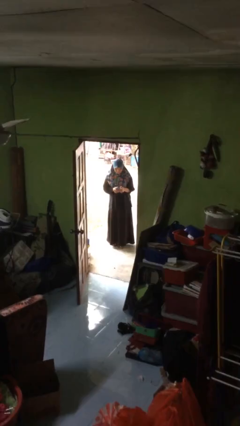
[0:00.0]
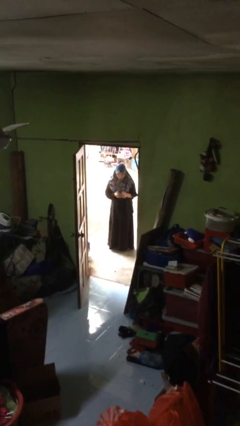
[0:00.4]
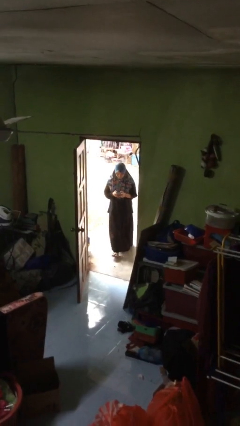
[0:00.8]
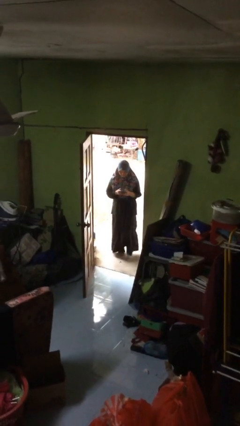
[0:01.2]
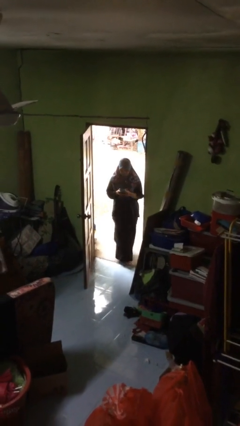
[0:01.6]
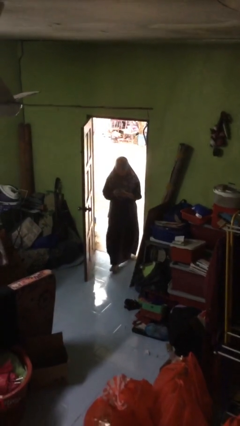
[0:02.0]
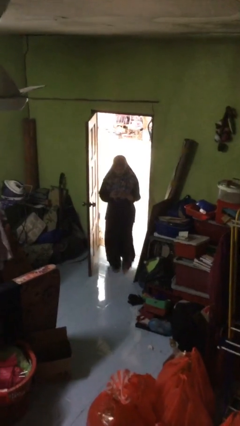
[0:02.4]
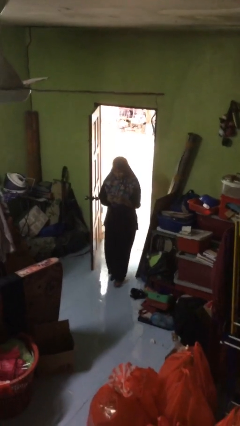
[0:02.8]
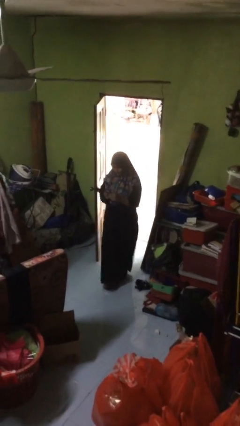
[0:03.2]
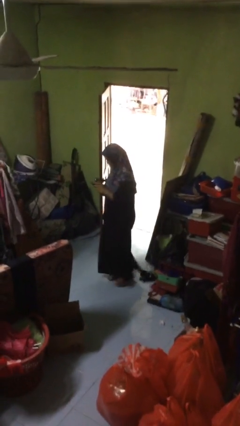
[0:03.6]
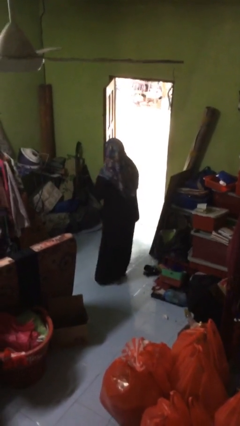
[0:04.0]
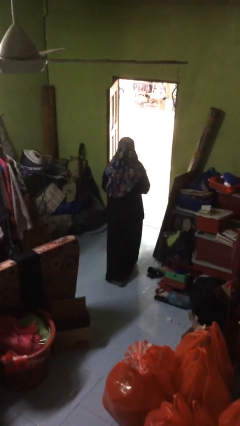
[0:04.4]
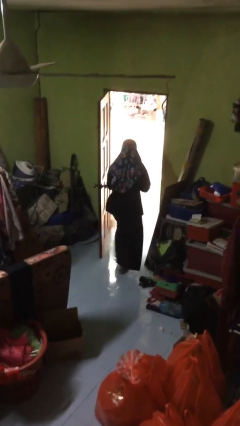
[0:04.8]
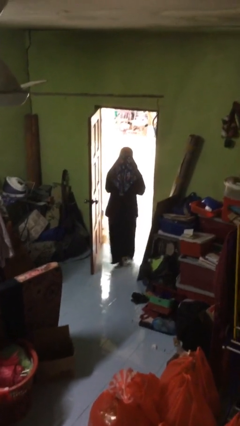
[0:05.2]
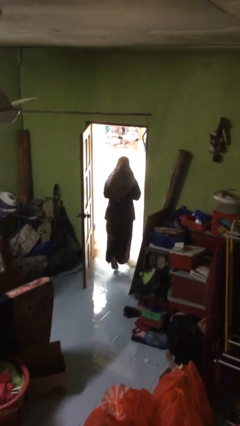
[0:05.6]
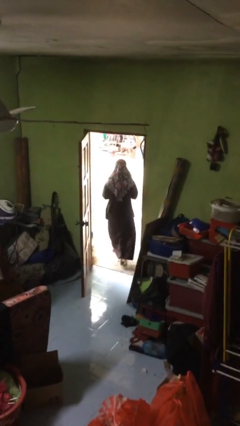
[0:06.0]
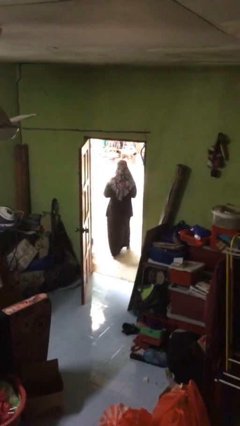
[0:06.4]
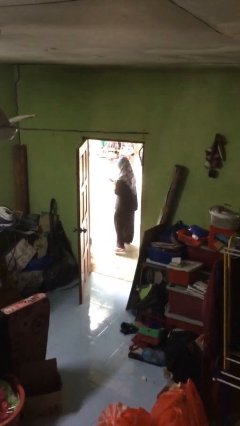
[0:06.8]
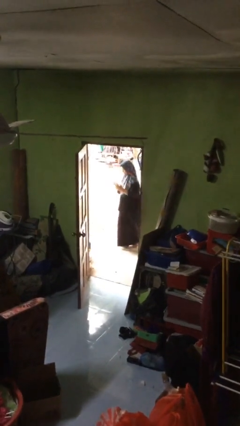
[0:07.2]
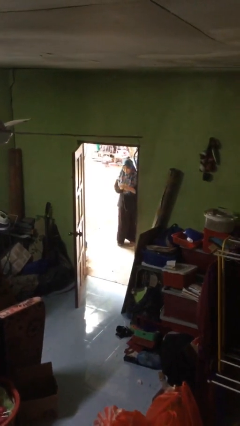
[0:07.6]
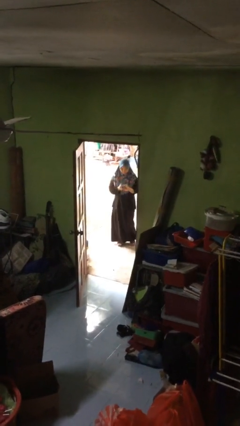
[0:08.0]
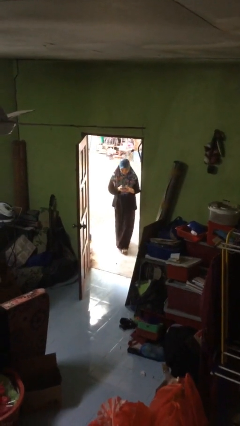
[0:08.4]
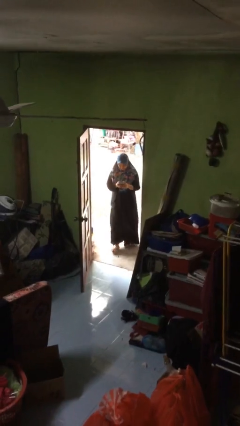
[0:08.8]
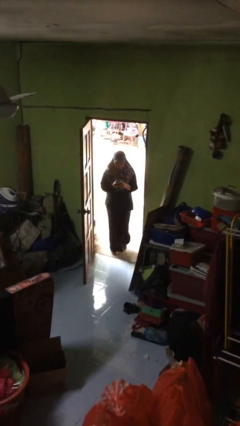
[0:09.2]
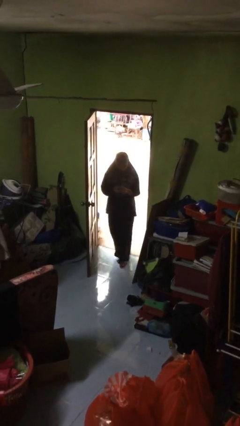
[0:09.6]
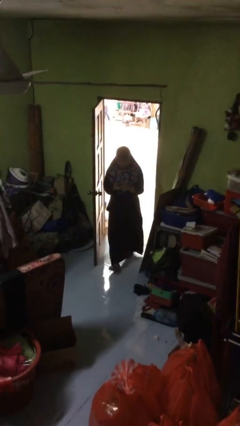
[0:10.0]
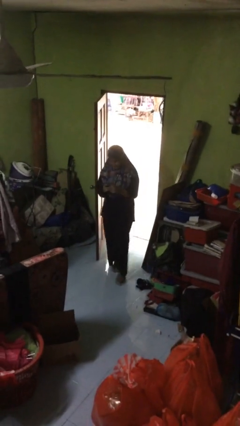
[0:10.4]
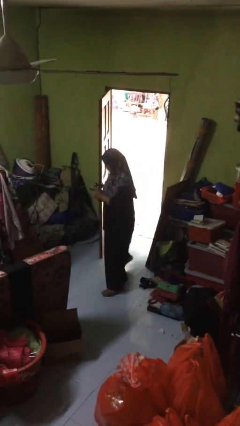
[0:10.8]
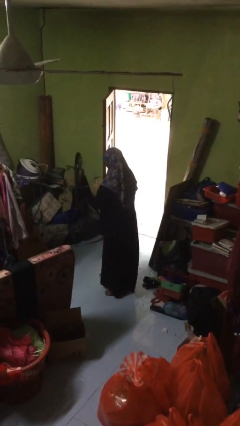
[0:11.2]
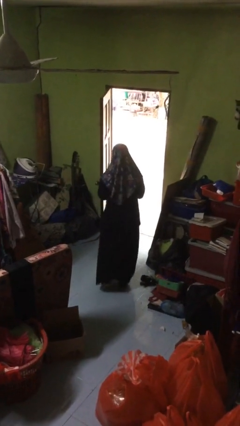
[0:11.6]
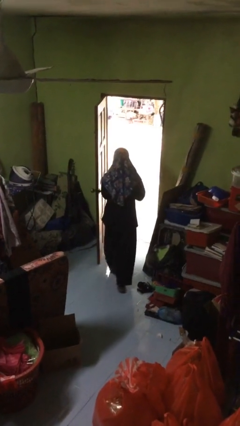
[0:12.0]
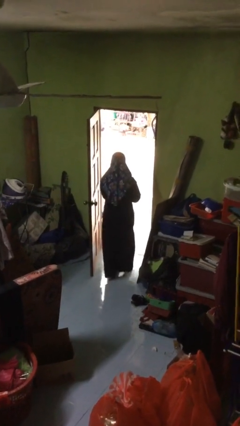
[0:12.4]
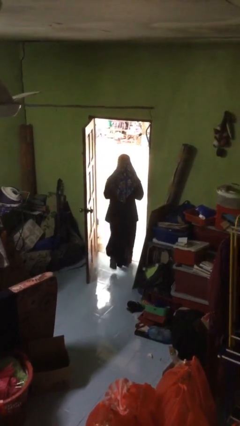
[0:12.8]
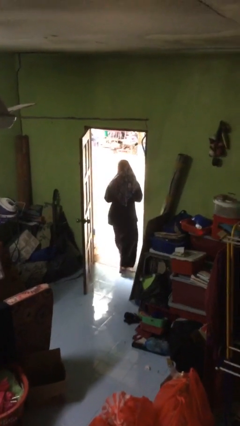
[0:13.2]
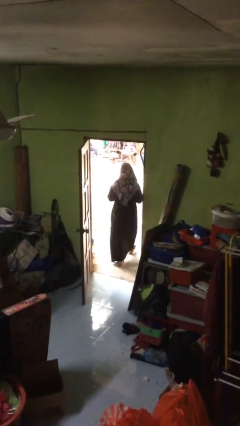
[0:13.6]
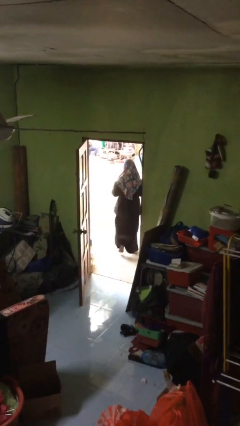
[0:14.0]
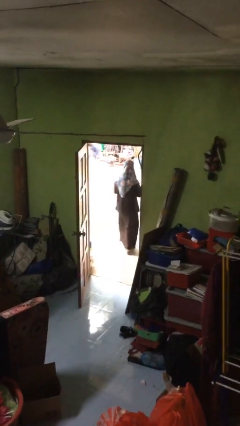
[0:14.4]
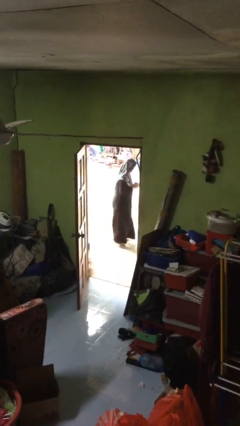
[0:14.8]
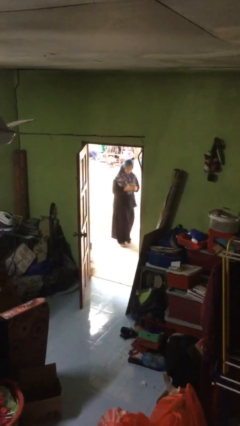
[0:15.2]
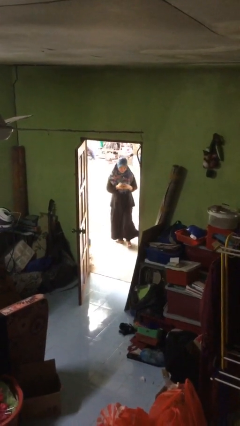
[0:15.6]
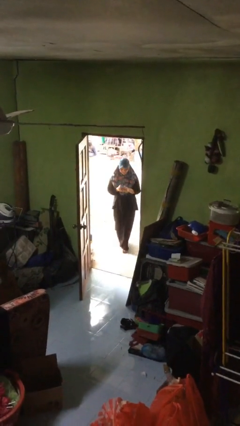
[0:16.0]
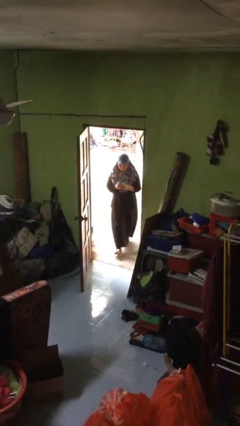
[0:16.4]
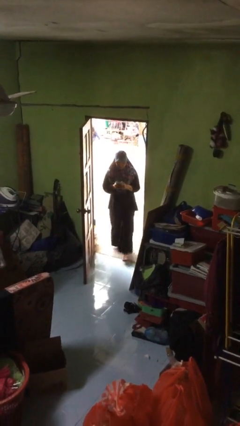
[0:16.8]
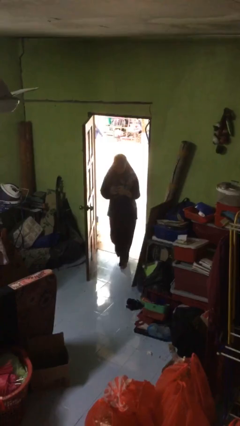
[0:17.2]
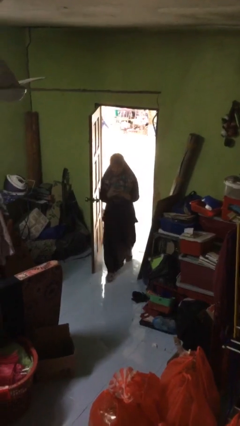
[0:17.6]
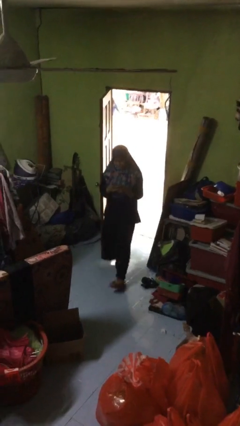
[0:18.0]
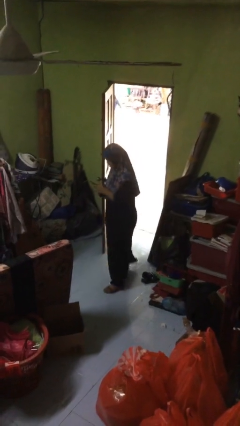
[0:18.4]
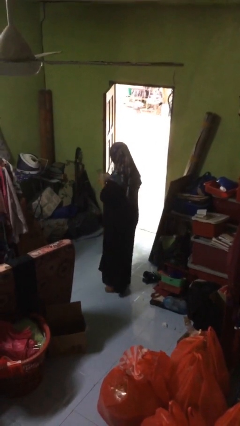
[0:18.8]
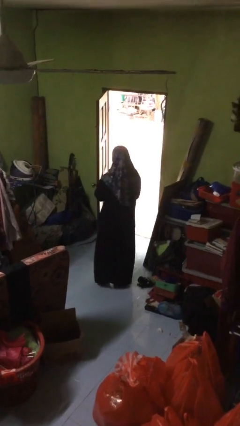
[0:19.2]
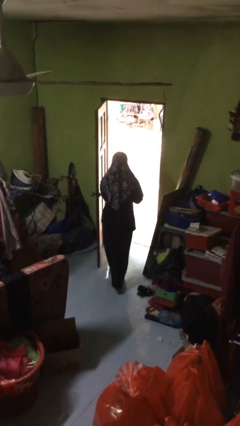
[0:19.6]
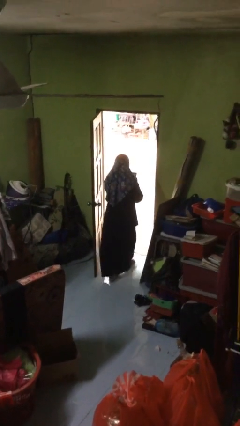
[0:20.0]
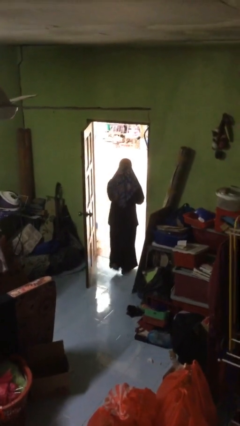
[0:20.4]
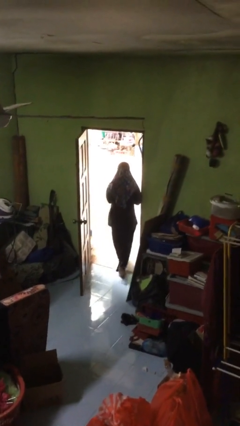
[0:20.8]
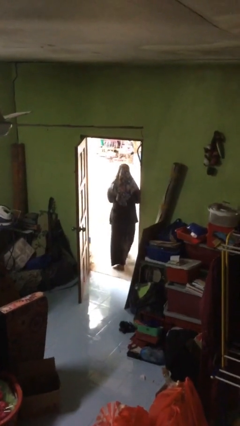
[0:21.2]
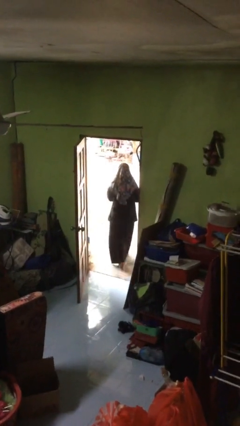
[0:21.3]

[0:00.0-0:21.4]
person texts on phone

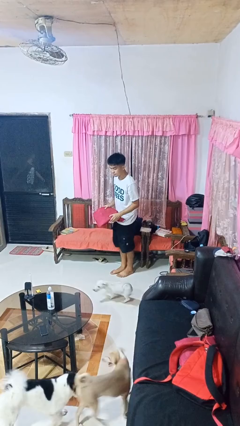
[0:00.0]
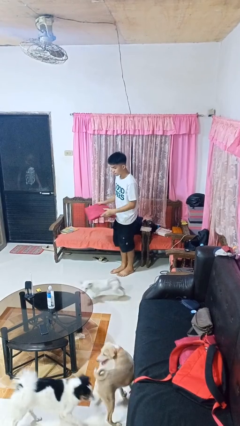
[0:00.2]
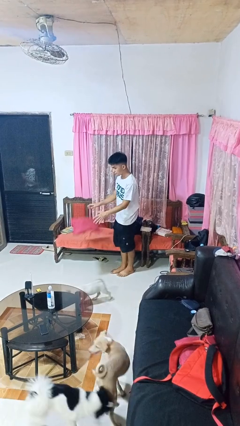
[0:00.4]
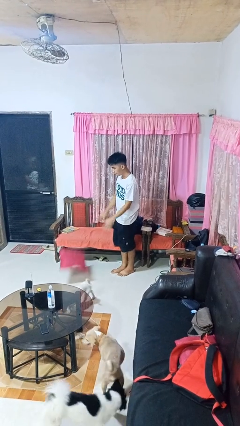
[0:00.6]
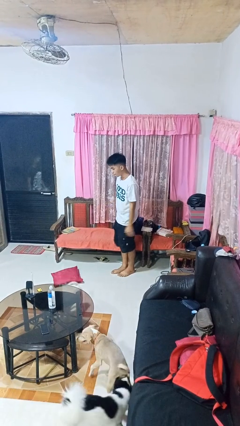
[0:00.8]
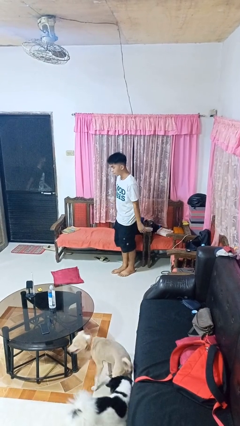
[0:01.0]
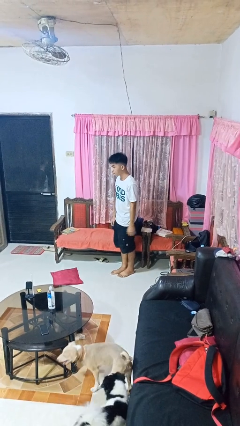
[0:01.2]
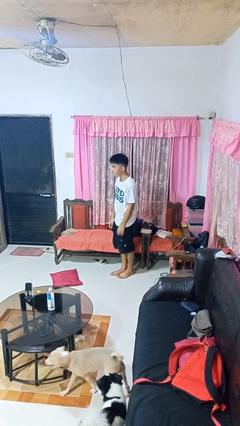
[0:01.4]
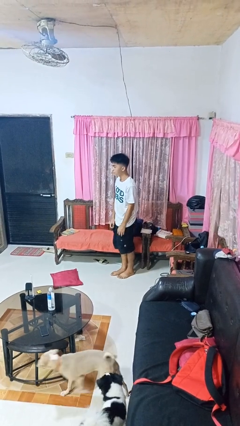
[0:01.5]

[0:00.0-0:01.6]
person throws object to ground

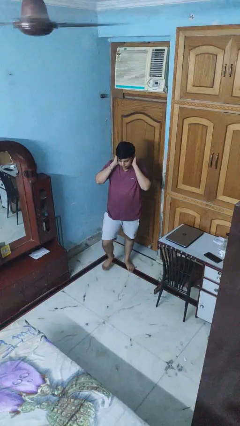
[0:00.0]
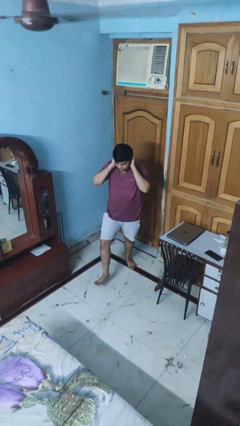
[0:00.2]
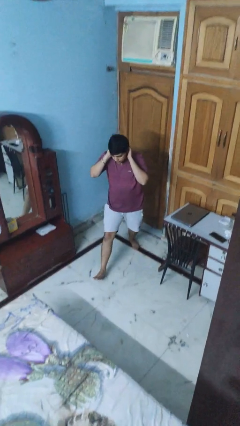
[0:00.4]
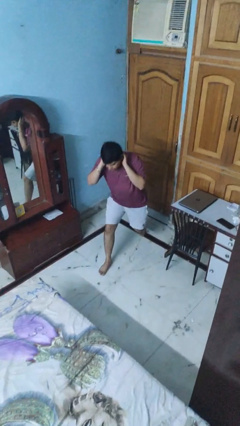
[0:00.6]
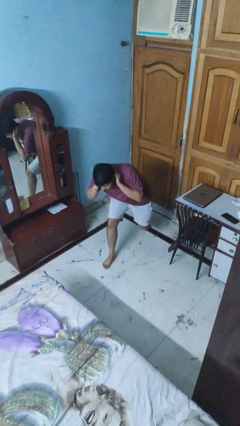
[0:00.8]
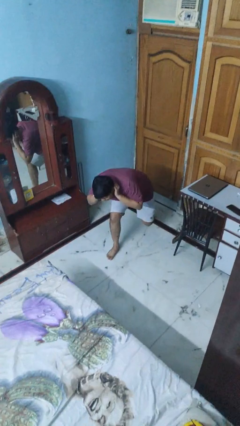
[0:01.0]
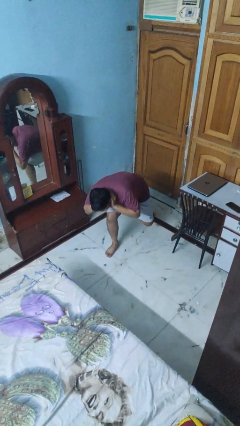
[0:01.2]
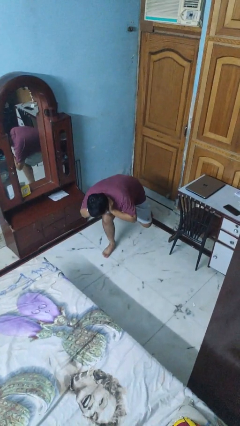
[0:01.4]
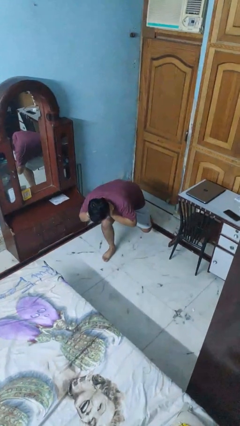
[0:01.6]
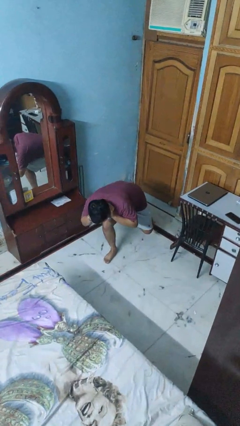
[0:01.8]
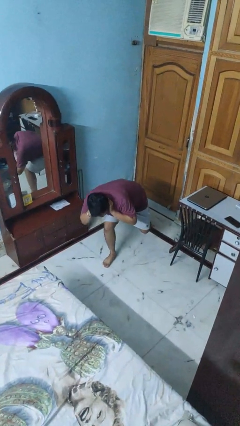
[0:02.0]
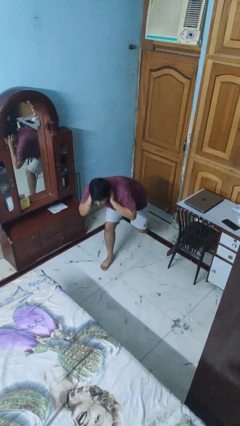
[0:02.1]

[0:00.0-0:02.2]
person exercises with lunges

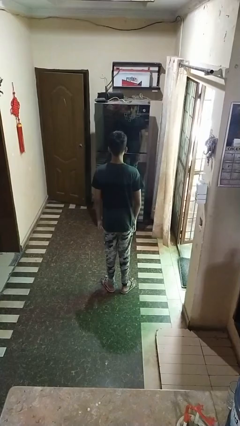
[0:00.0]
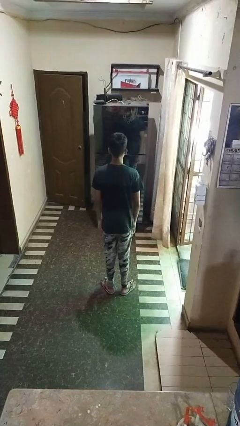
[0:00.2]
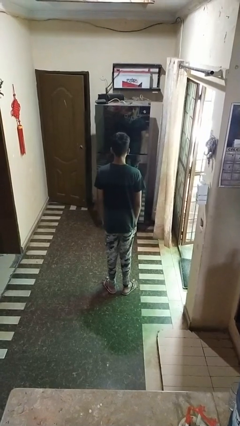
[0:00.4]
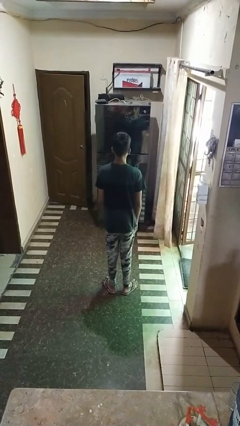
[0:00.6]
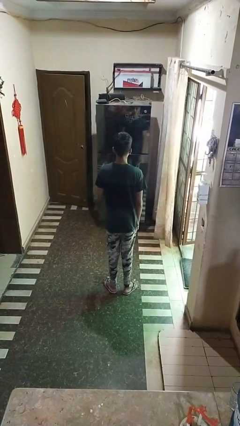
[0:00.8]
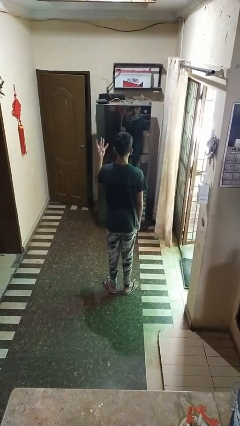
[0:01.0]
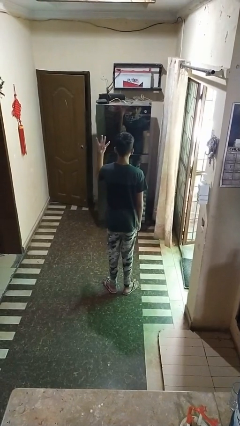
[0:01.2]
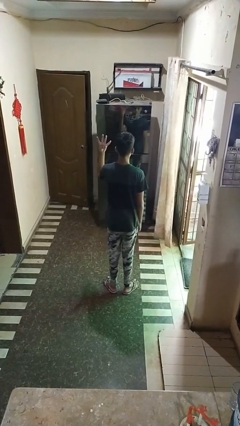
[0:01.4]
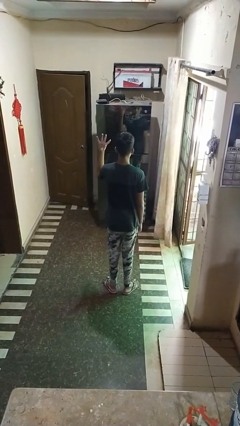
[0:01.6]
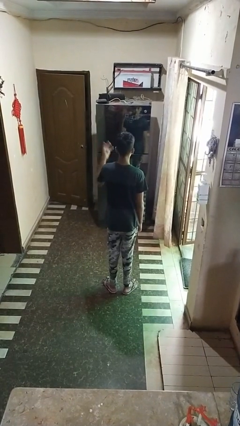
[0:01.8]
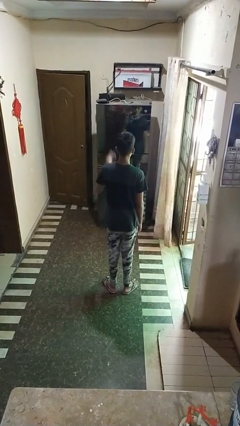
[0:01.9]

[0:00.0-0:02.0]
person gestures number four

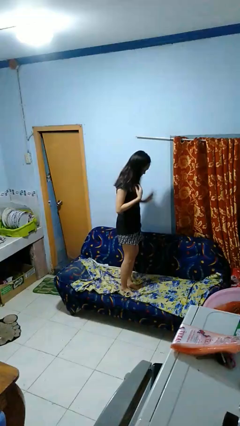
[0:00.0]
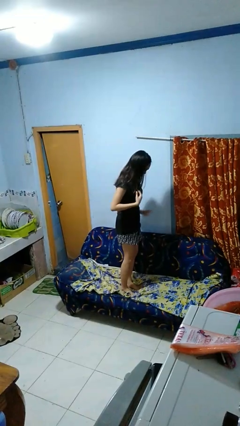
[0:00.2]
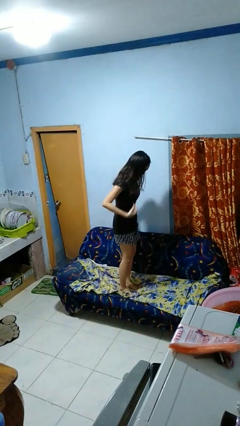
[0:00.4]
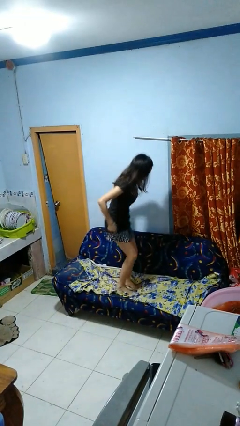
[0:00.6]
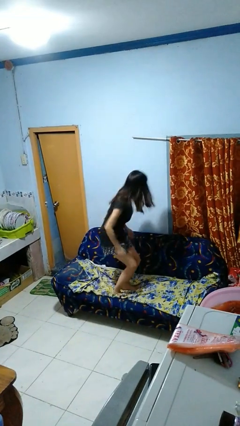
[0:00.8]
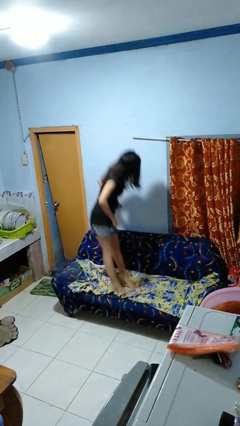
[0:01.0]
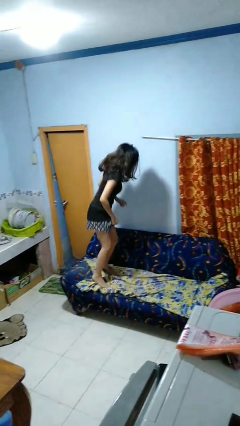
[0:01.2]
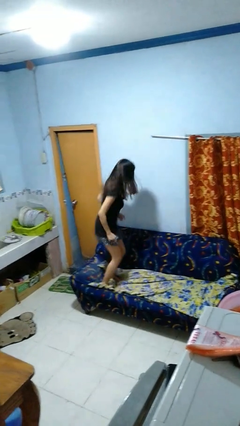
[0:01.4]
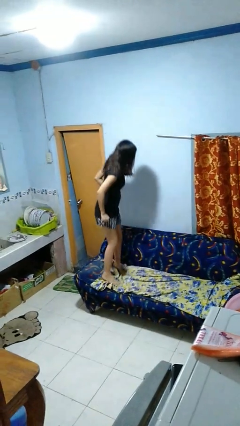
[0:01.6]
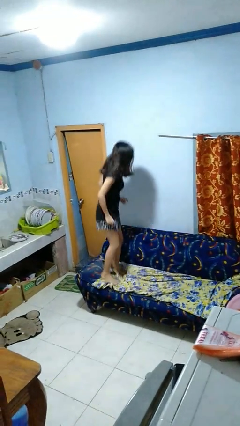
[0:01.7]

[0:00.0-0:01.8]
person jumps on couch
